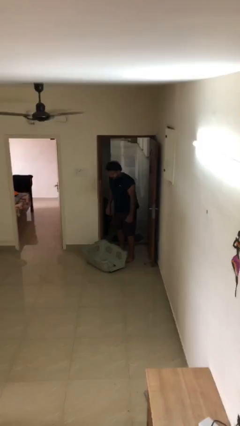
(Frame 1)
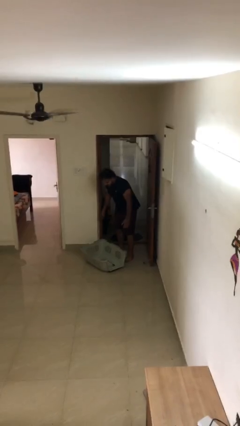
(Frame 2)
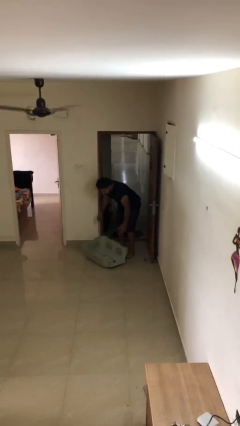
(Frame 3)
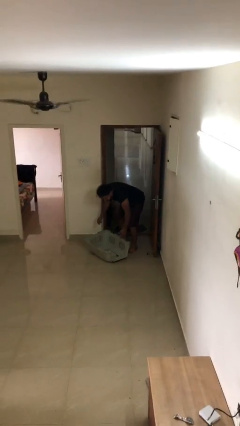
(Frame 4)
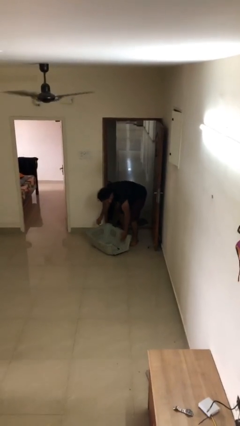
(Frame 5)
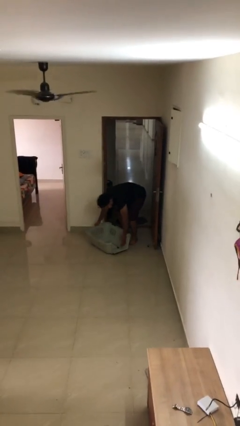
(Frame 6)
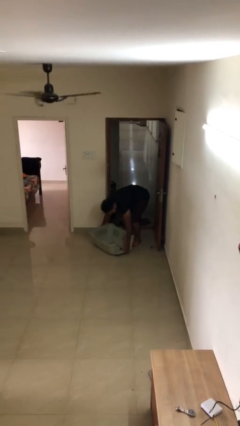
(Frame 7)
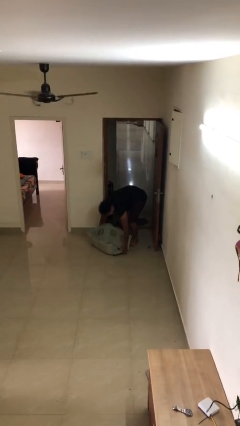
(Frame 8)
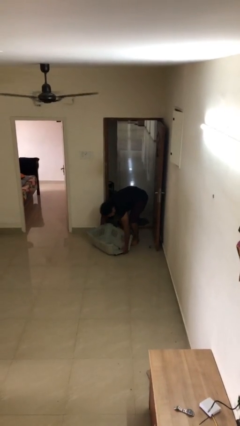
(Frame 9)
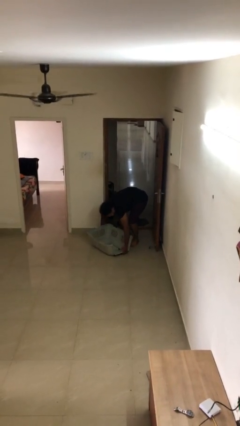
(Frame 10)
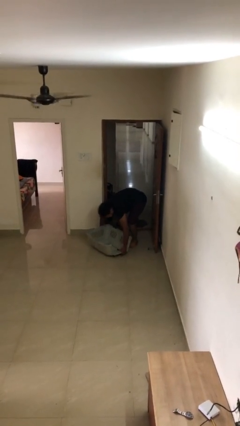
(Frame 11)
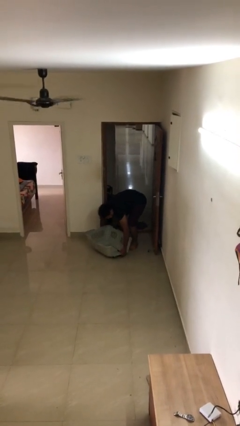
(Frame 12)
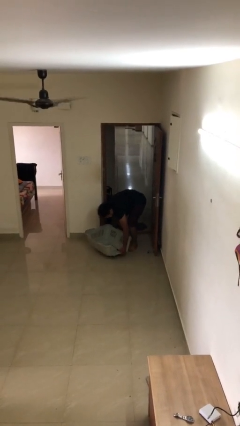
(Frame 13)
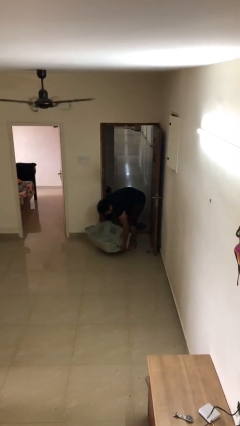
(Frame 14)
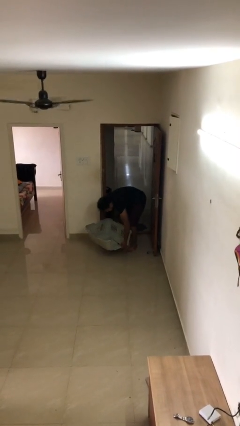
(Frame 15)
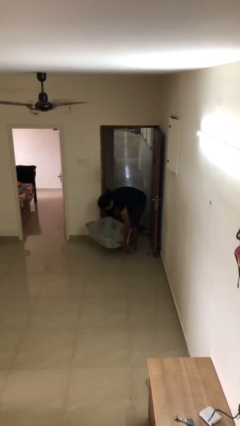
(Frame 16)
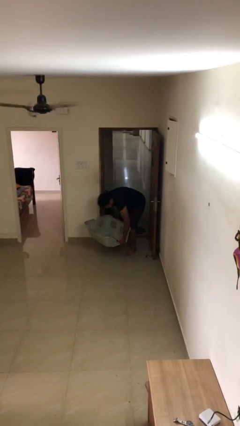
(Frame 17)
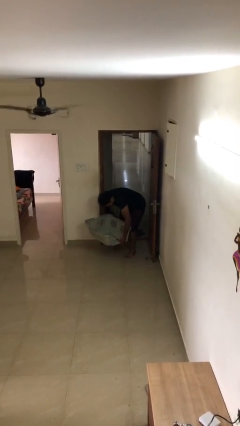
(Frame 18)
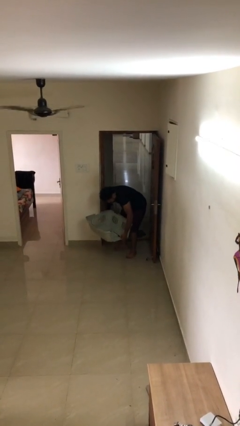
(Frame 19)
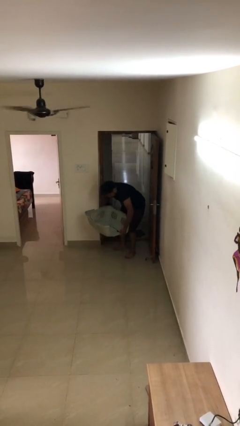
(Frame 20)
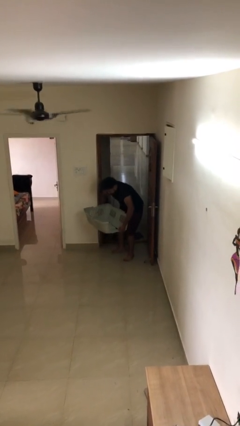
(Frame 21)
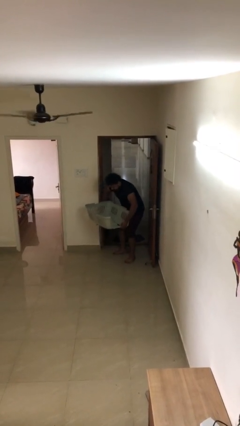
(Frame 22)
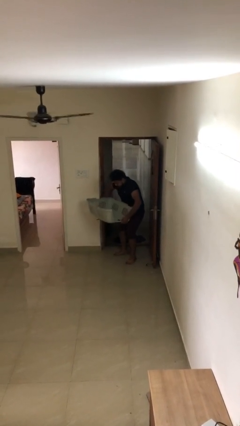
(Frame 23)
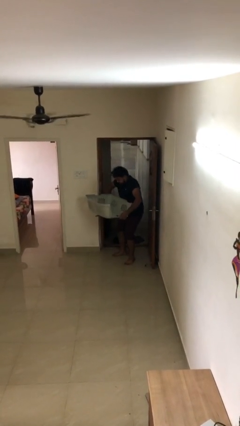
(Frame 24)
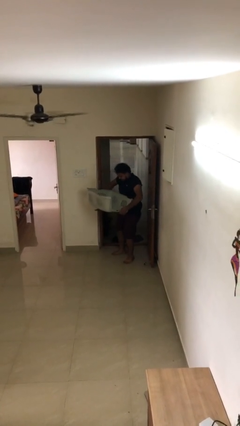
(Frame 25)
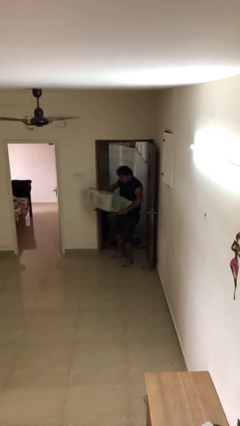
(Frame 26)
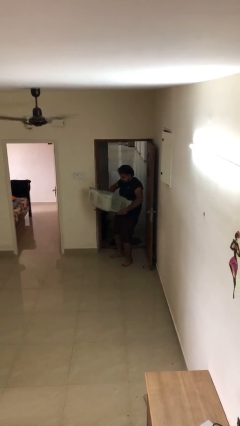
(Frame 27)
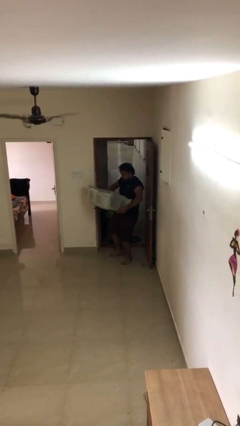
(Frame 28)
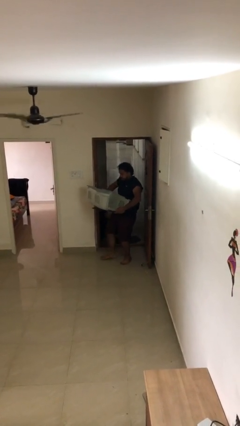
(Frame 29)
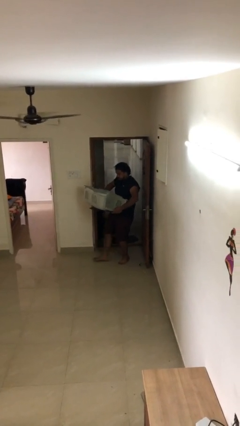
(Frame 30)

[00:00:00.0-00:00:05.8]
person picks up object from floor

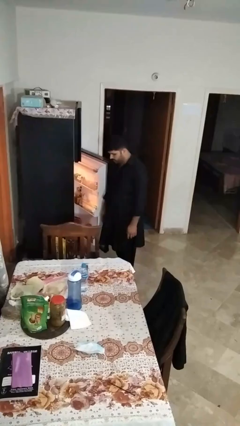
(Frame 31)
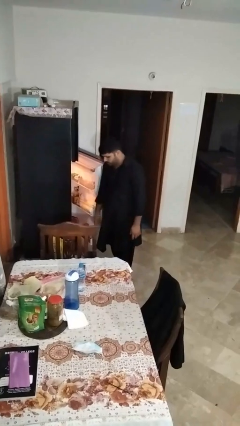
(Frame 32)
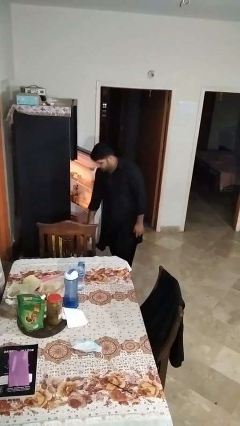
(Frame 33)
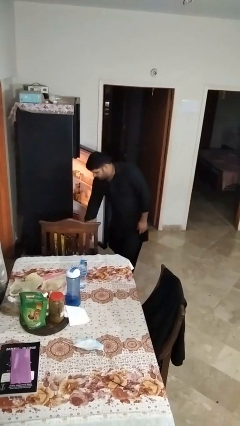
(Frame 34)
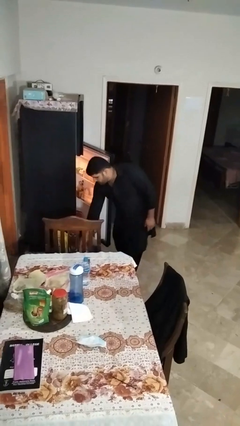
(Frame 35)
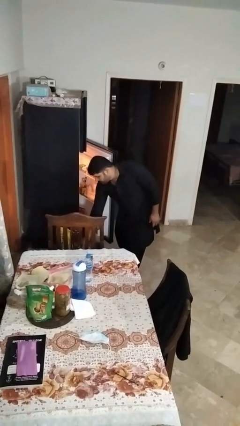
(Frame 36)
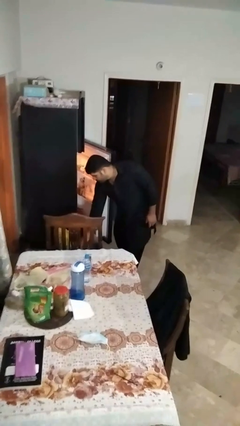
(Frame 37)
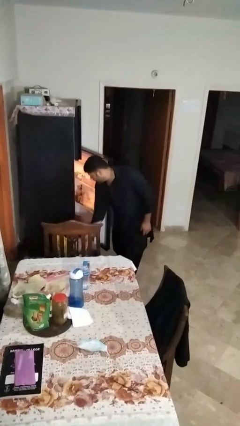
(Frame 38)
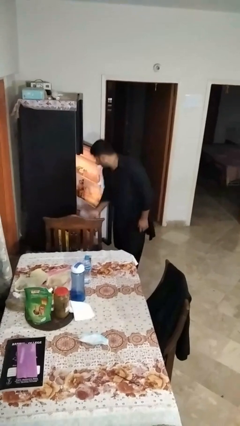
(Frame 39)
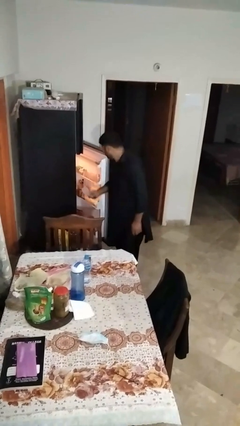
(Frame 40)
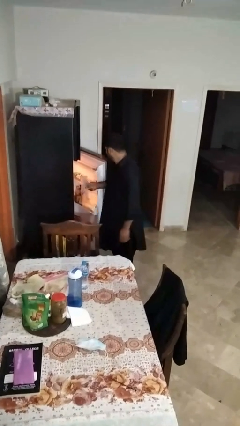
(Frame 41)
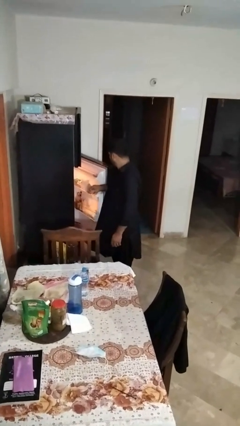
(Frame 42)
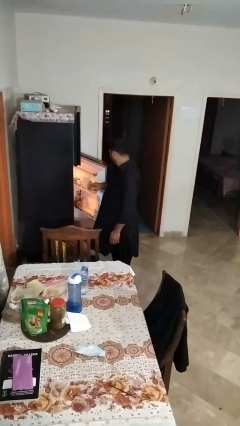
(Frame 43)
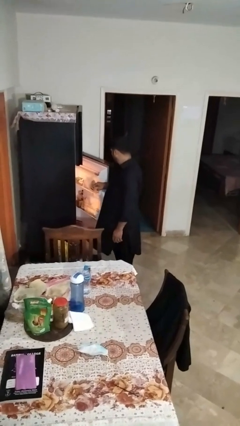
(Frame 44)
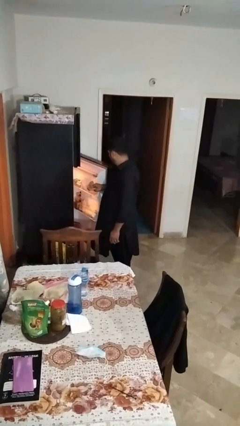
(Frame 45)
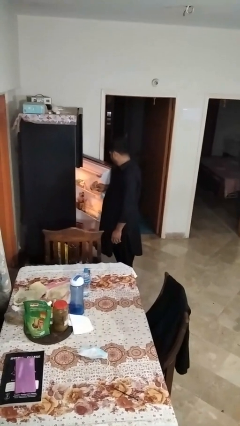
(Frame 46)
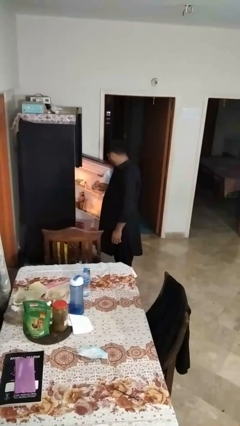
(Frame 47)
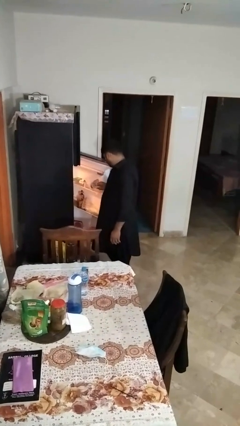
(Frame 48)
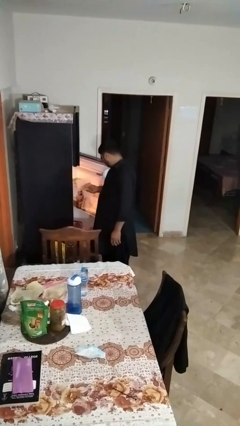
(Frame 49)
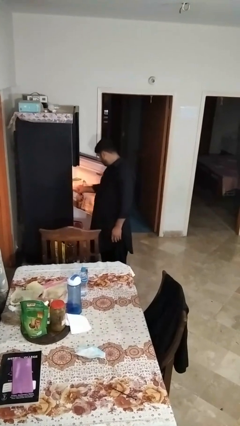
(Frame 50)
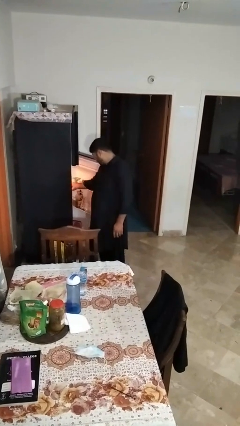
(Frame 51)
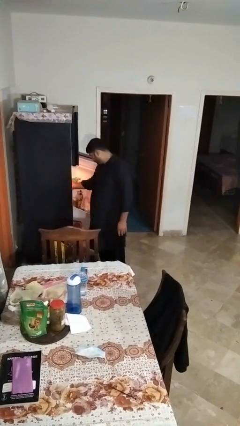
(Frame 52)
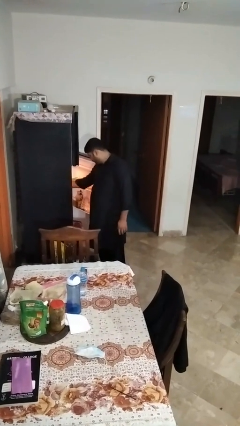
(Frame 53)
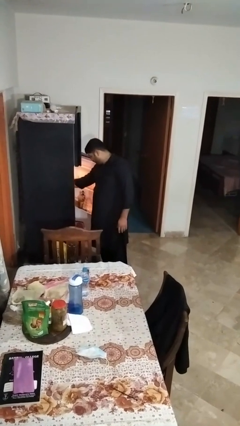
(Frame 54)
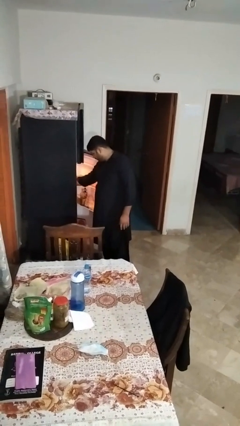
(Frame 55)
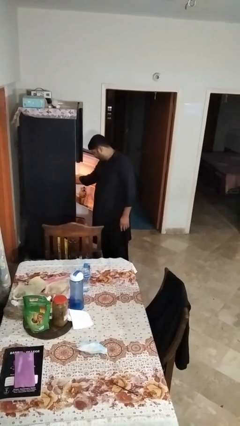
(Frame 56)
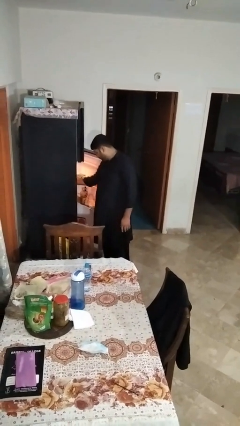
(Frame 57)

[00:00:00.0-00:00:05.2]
person loads groceries into refrigerator

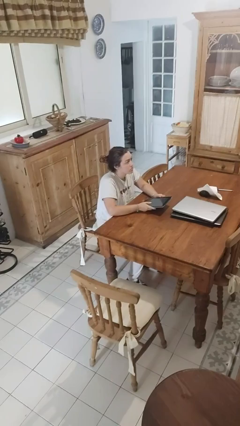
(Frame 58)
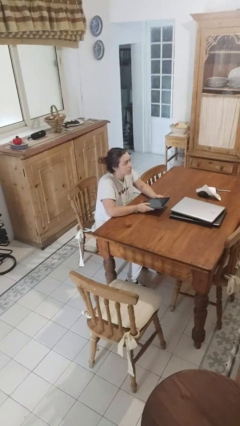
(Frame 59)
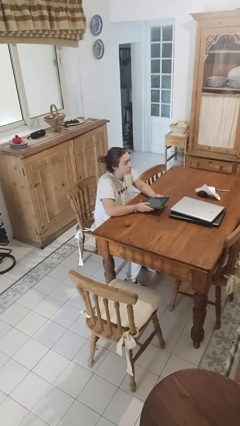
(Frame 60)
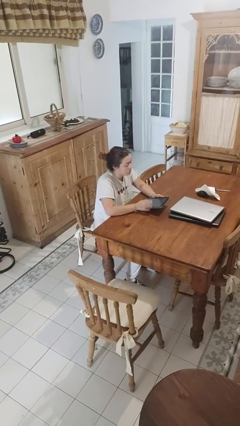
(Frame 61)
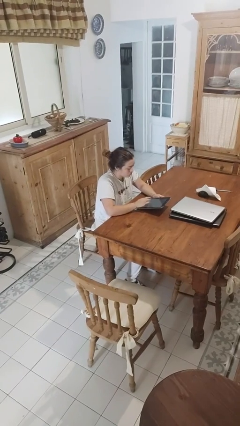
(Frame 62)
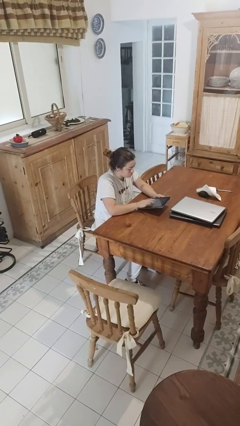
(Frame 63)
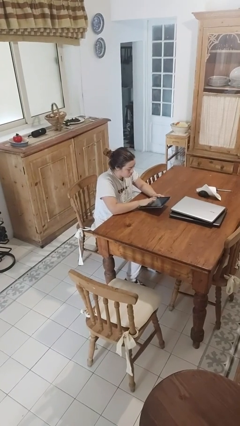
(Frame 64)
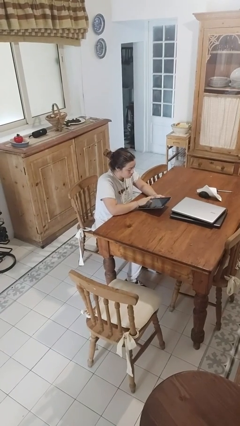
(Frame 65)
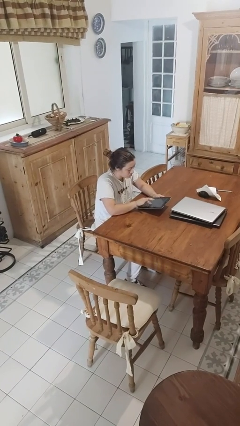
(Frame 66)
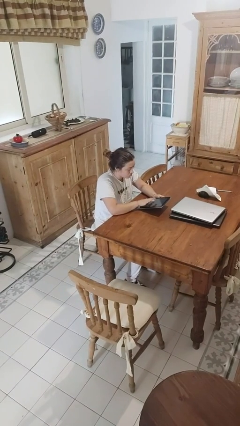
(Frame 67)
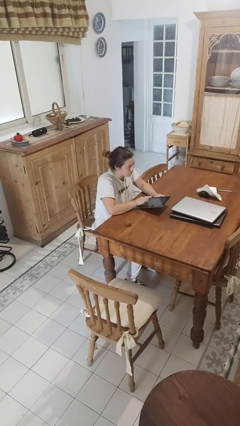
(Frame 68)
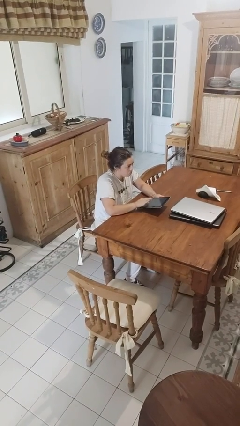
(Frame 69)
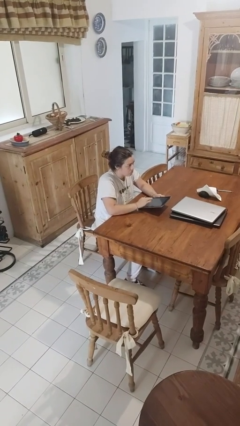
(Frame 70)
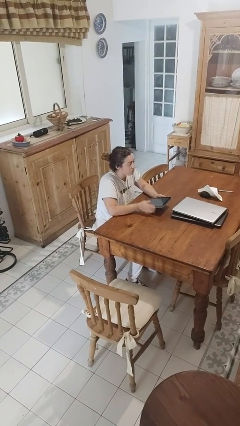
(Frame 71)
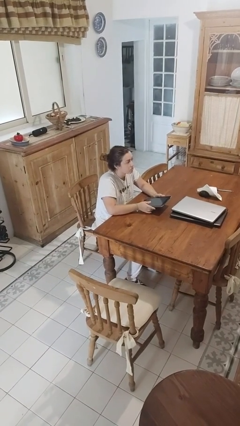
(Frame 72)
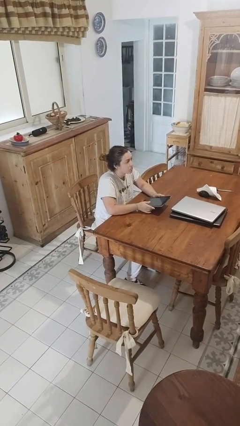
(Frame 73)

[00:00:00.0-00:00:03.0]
person interacts with tablet

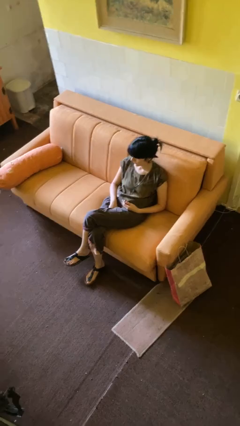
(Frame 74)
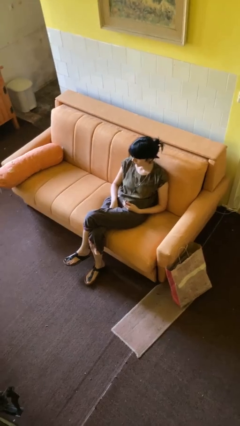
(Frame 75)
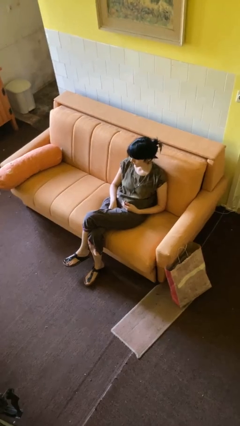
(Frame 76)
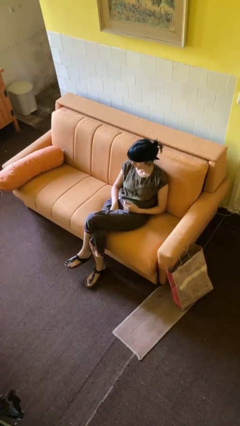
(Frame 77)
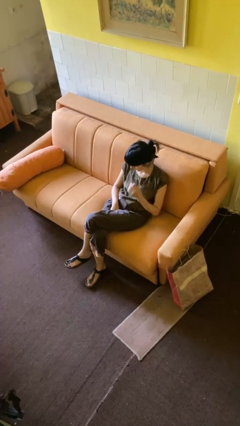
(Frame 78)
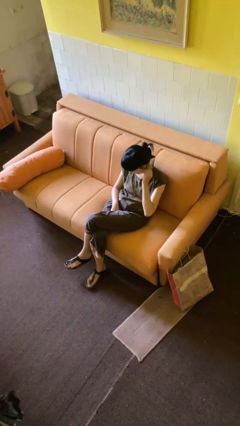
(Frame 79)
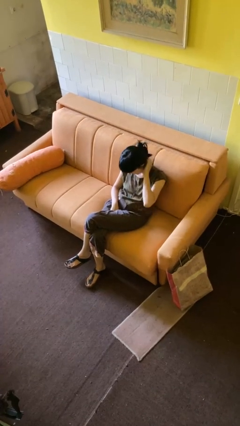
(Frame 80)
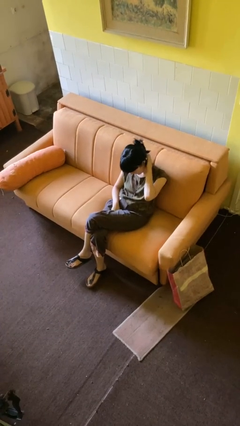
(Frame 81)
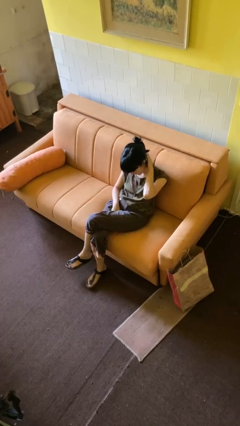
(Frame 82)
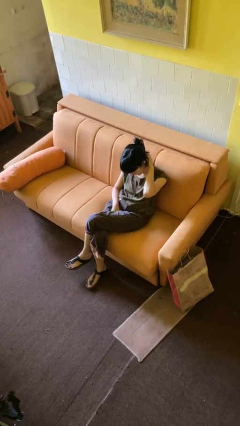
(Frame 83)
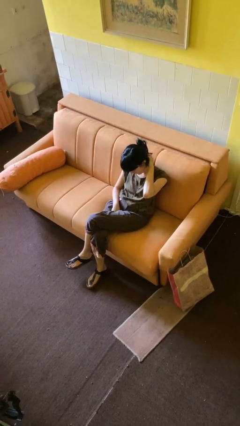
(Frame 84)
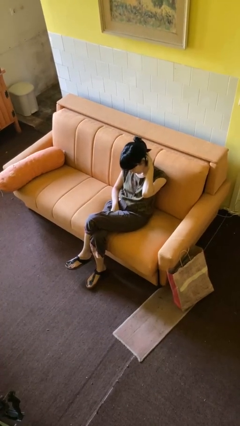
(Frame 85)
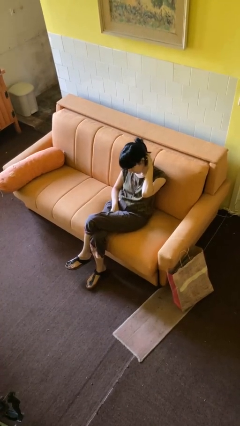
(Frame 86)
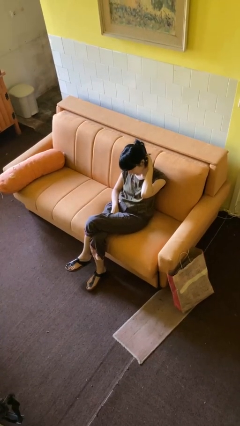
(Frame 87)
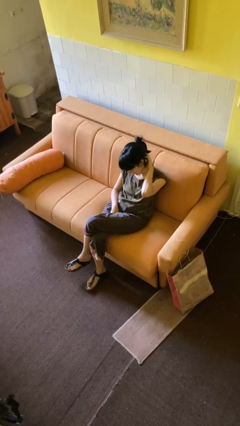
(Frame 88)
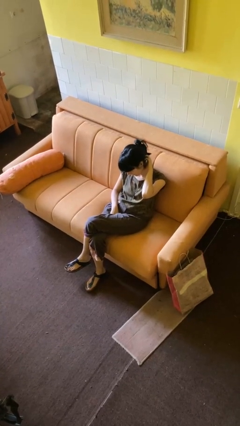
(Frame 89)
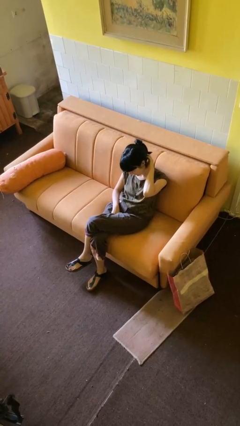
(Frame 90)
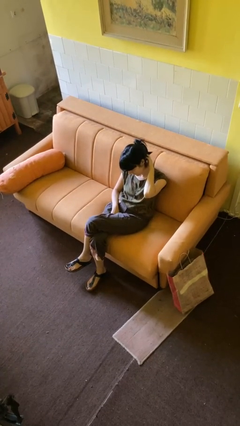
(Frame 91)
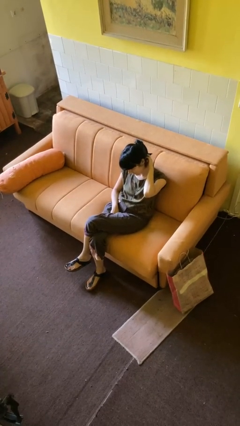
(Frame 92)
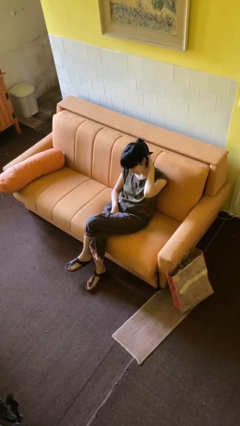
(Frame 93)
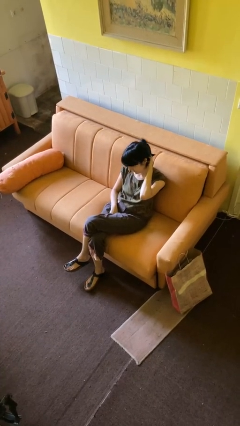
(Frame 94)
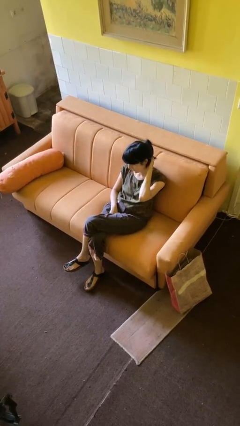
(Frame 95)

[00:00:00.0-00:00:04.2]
person scratches face
